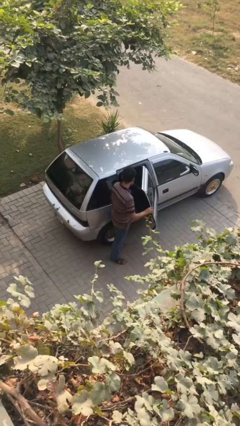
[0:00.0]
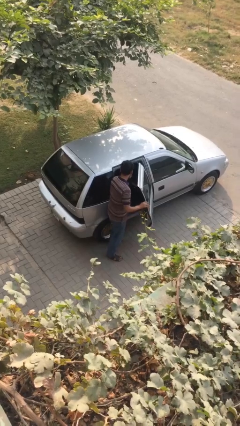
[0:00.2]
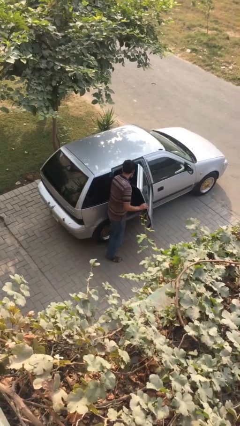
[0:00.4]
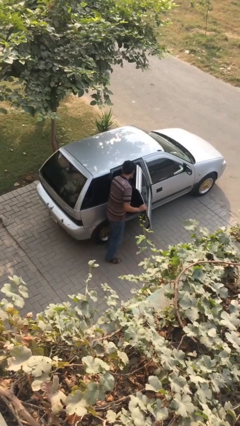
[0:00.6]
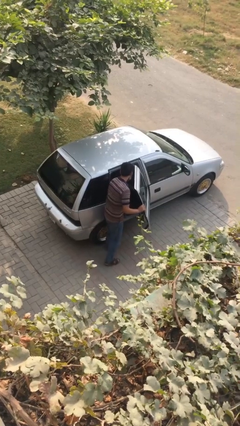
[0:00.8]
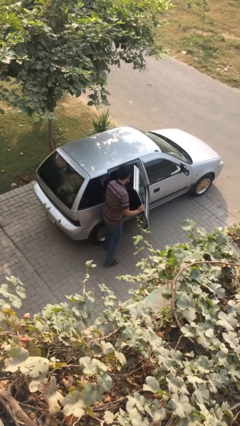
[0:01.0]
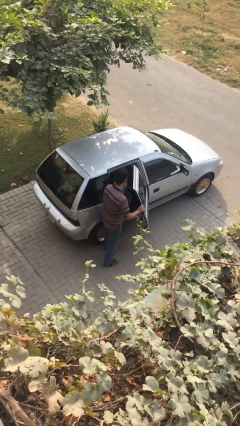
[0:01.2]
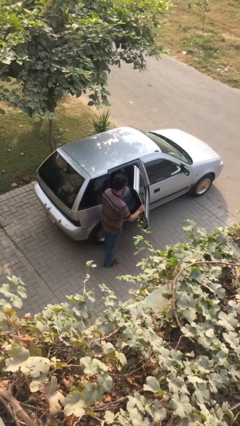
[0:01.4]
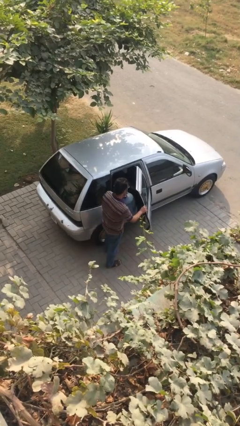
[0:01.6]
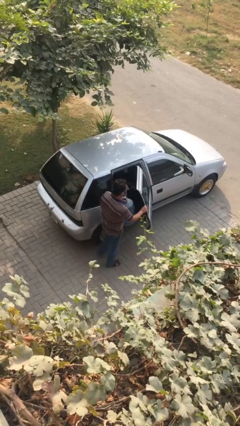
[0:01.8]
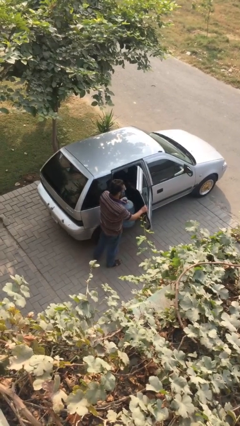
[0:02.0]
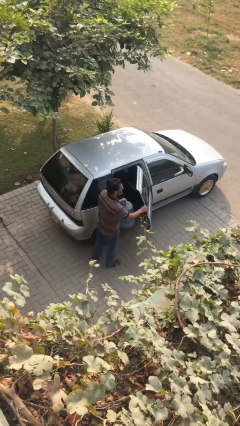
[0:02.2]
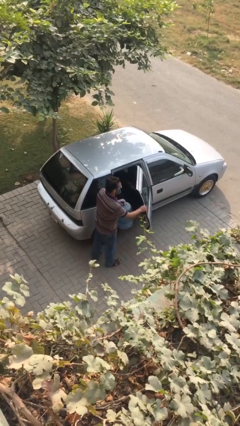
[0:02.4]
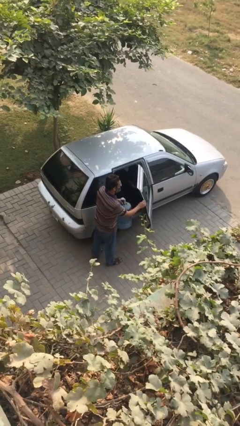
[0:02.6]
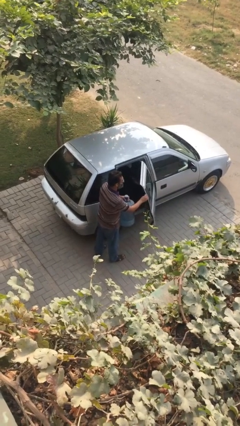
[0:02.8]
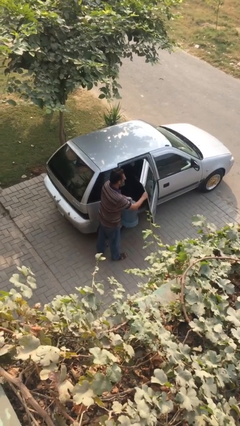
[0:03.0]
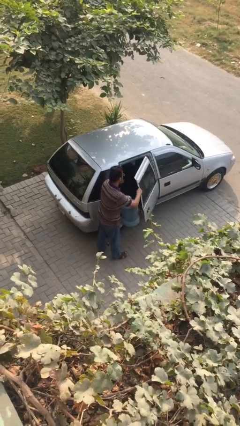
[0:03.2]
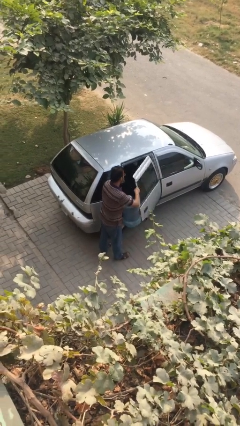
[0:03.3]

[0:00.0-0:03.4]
person unloads car

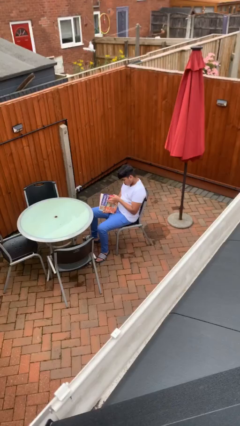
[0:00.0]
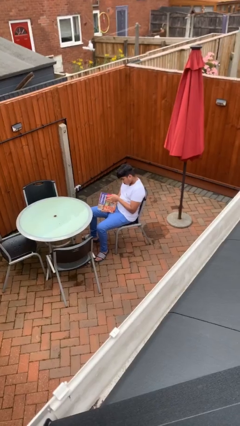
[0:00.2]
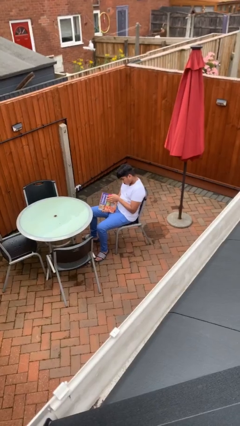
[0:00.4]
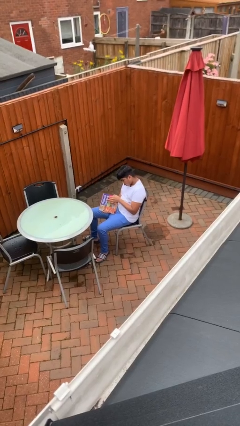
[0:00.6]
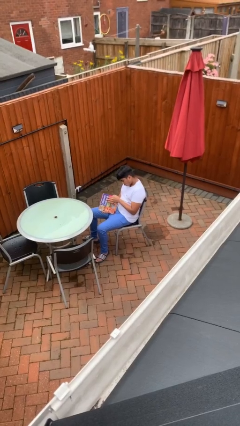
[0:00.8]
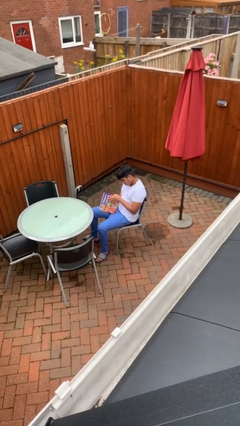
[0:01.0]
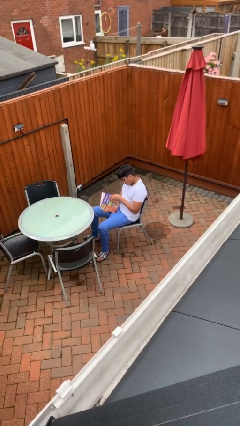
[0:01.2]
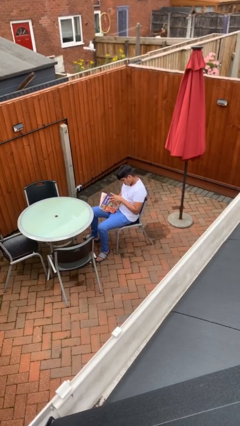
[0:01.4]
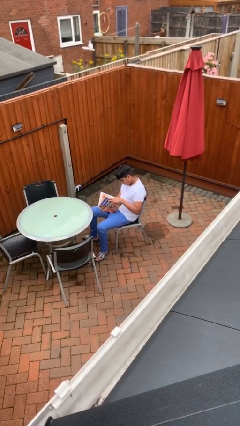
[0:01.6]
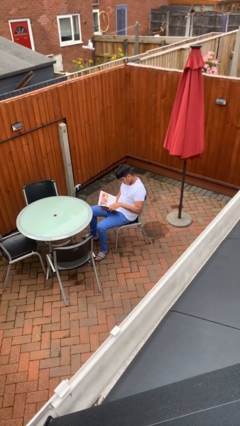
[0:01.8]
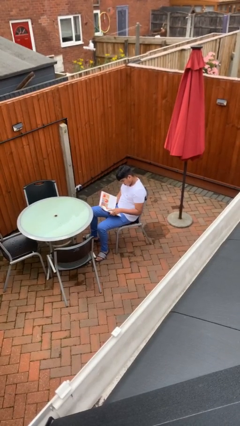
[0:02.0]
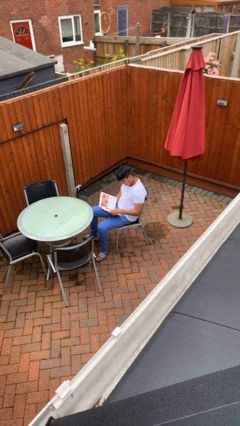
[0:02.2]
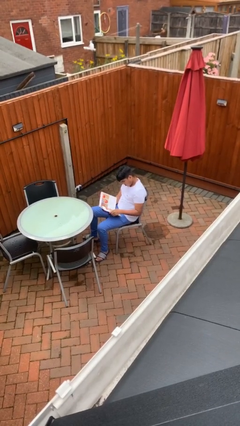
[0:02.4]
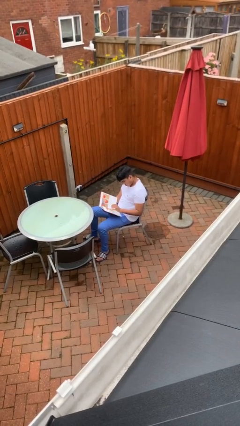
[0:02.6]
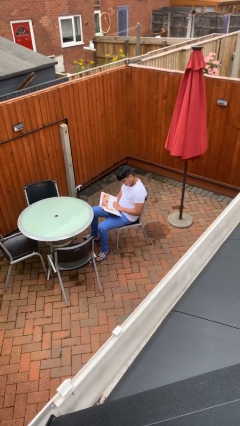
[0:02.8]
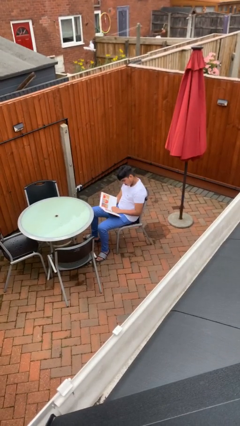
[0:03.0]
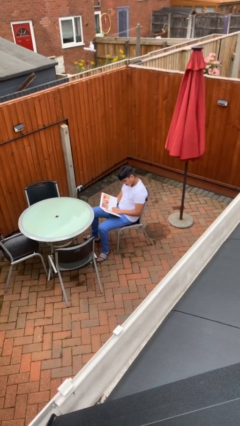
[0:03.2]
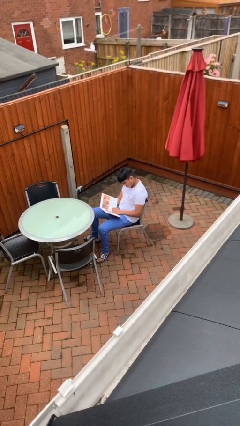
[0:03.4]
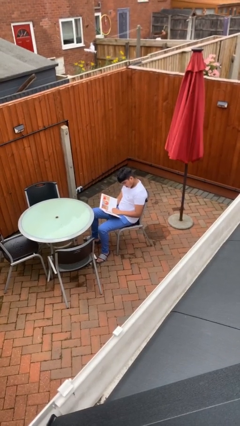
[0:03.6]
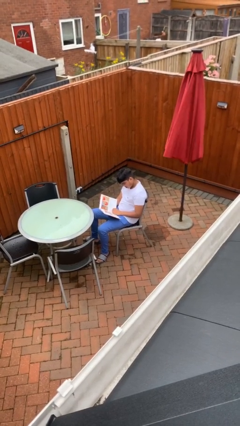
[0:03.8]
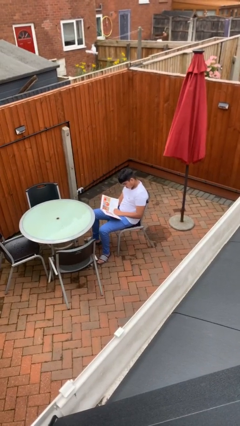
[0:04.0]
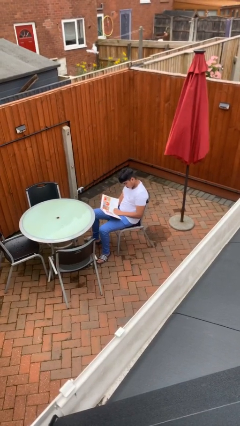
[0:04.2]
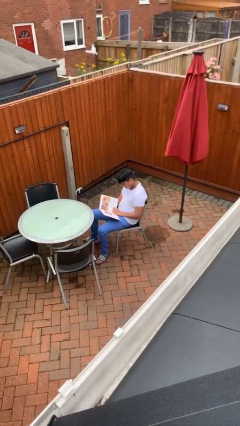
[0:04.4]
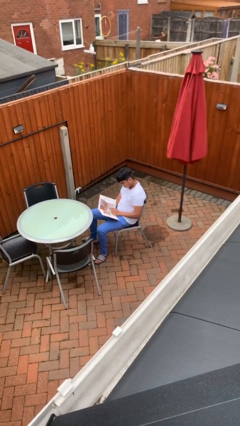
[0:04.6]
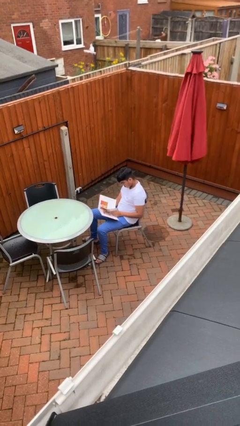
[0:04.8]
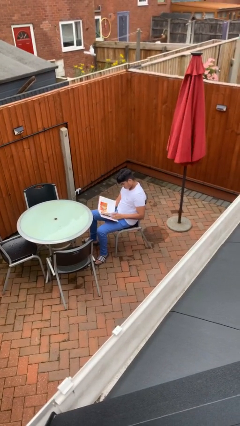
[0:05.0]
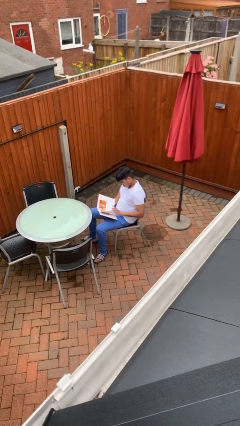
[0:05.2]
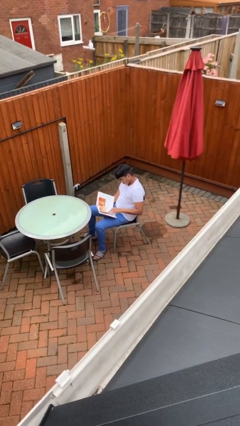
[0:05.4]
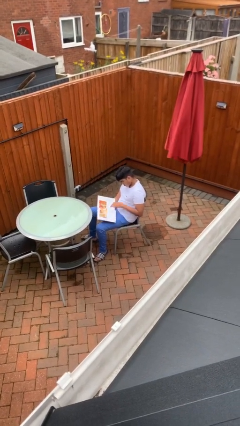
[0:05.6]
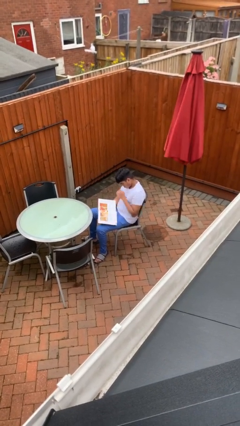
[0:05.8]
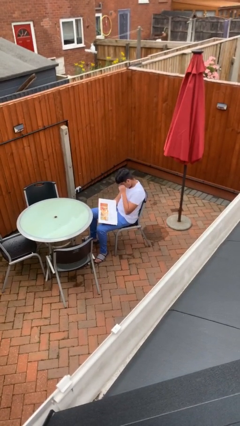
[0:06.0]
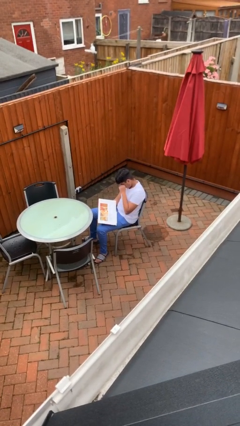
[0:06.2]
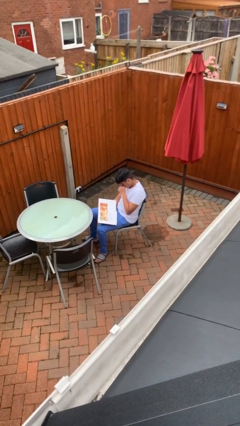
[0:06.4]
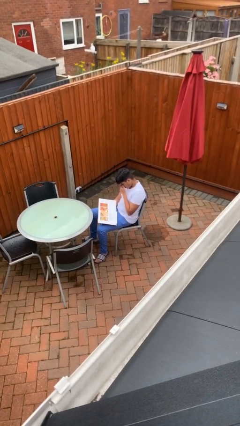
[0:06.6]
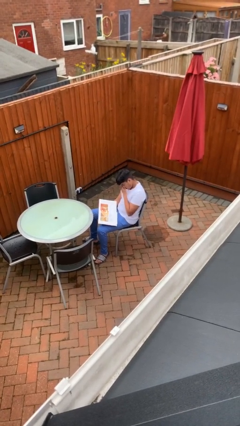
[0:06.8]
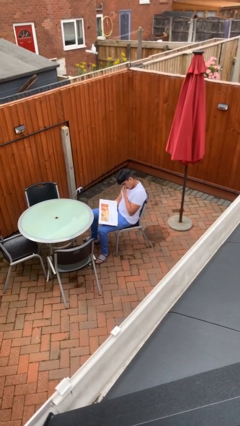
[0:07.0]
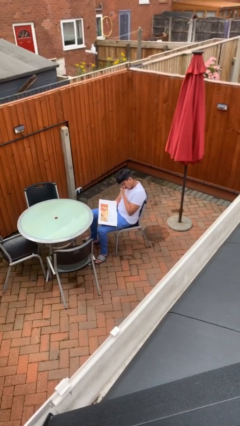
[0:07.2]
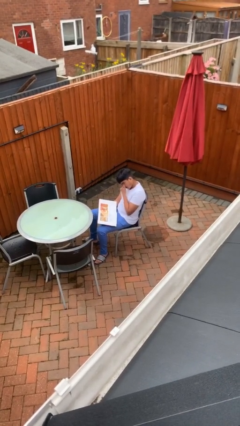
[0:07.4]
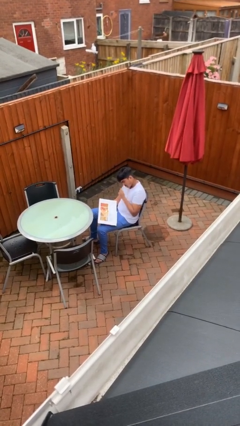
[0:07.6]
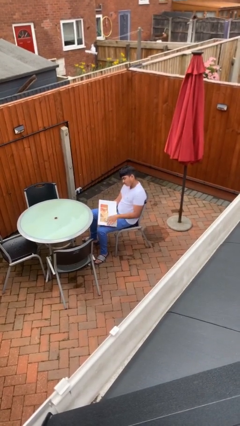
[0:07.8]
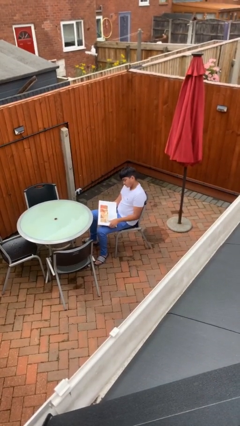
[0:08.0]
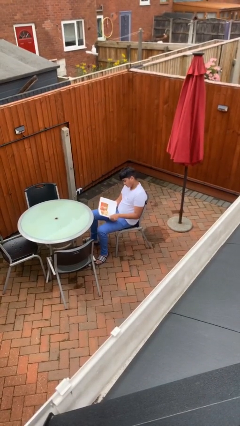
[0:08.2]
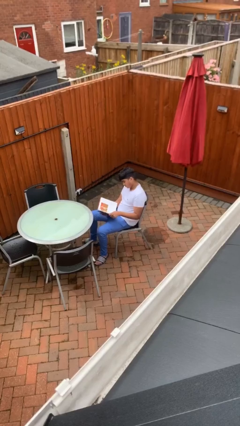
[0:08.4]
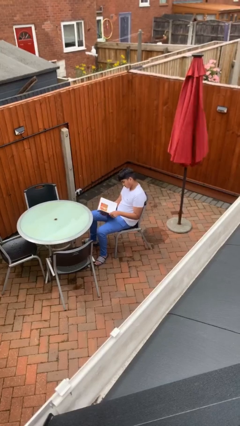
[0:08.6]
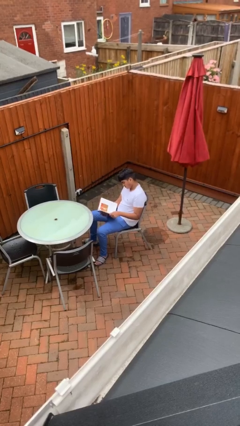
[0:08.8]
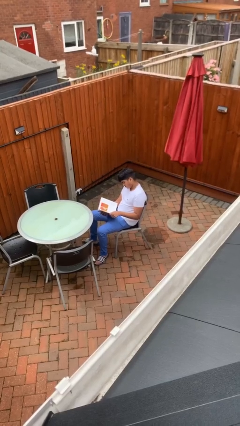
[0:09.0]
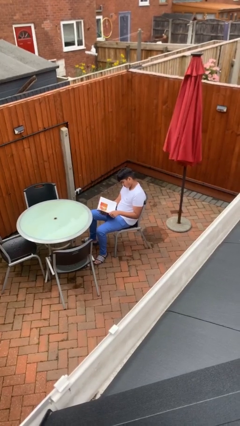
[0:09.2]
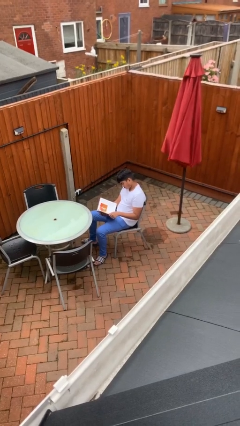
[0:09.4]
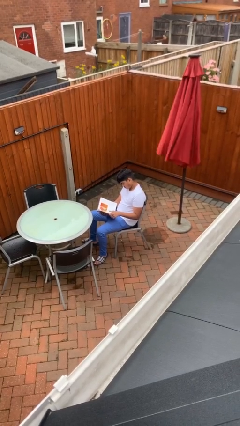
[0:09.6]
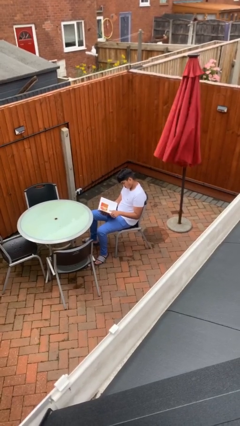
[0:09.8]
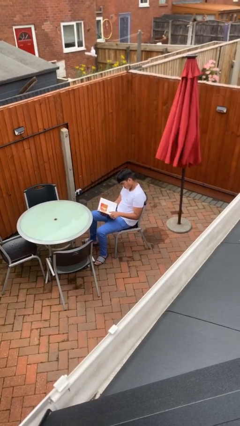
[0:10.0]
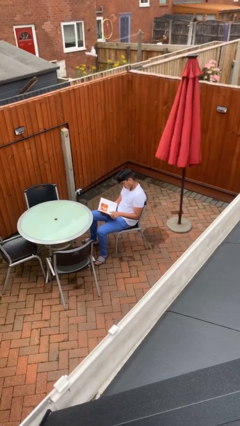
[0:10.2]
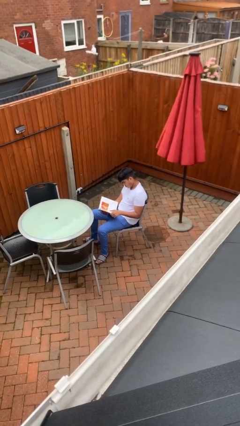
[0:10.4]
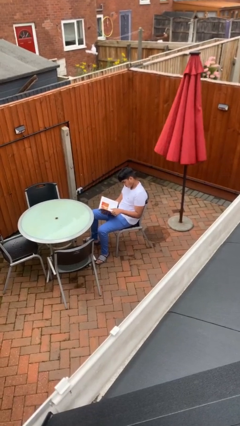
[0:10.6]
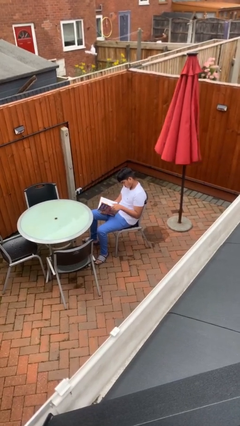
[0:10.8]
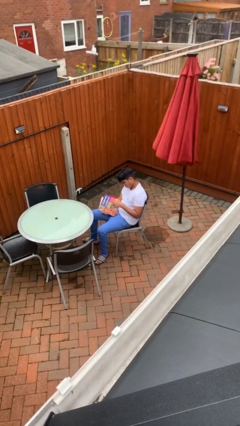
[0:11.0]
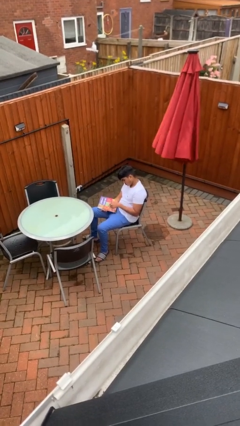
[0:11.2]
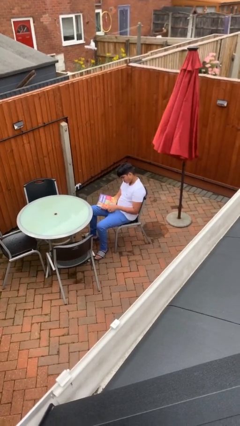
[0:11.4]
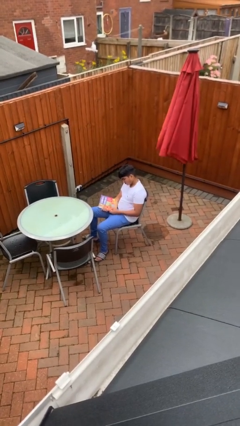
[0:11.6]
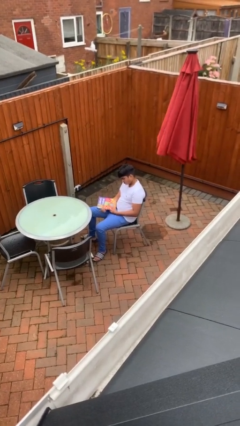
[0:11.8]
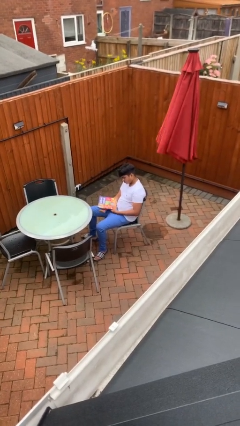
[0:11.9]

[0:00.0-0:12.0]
person reads document

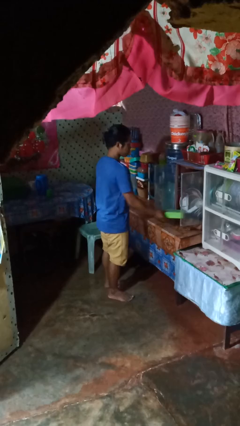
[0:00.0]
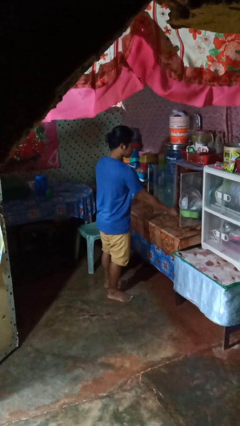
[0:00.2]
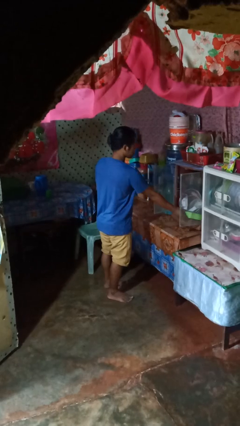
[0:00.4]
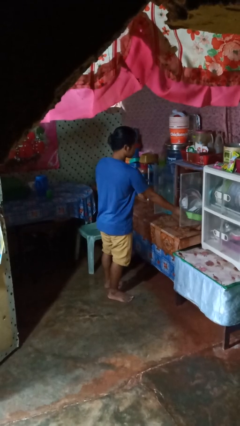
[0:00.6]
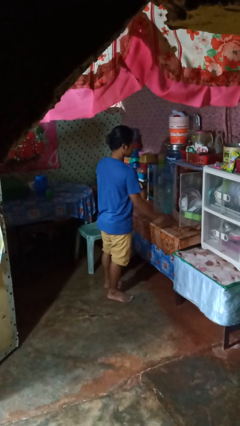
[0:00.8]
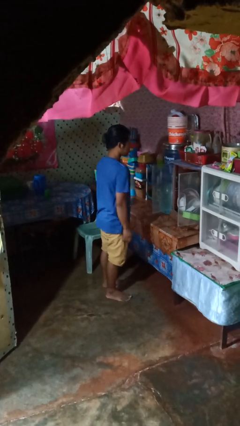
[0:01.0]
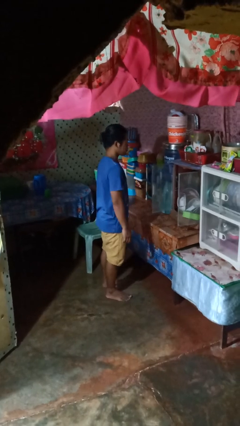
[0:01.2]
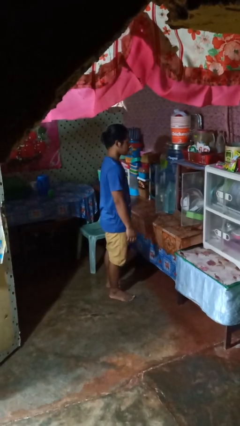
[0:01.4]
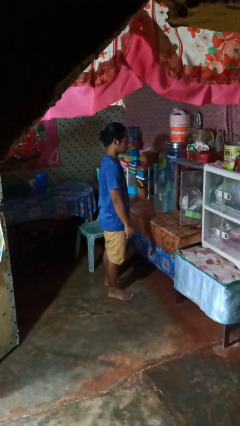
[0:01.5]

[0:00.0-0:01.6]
person puts down object into cabinet

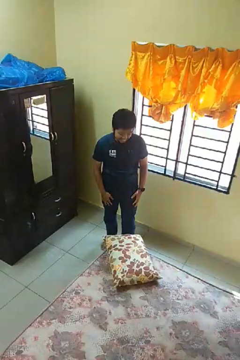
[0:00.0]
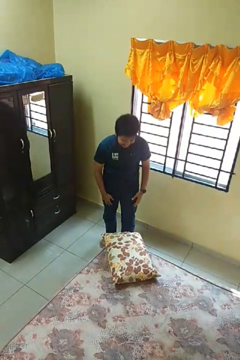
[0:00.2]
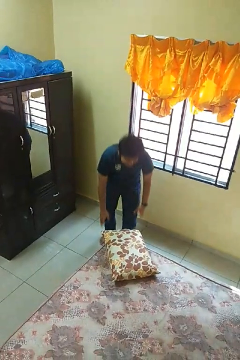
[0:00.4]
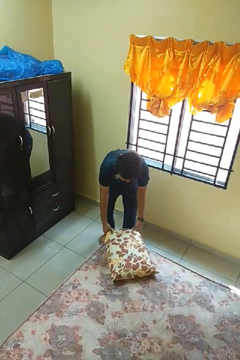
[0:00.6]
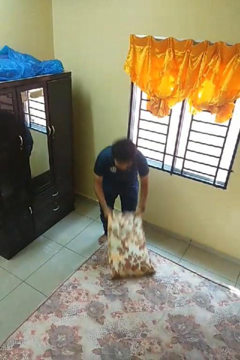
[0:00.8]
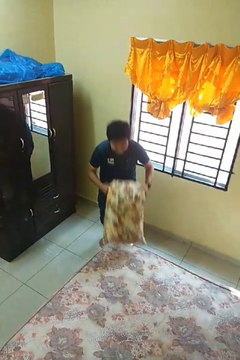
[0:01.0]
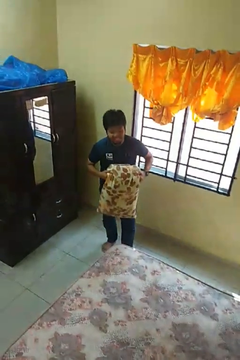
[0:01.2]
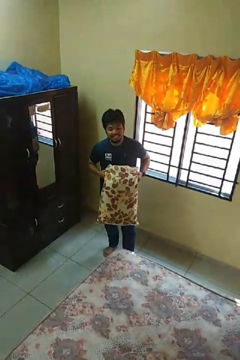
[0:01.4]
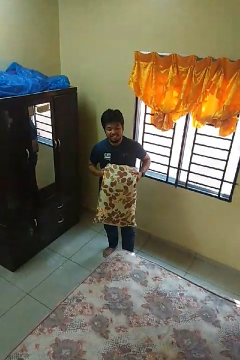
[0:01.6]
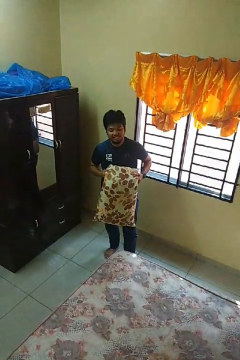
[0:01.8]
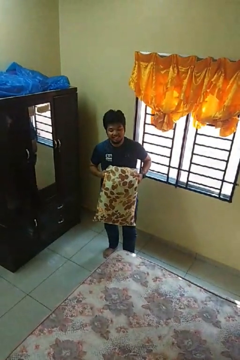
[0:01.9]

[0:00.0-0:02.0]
person picks up object from bed
